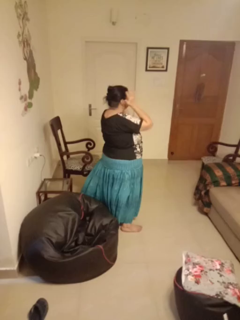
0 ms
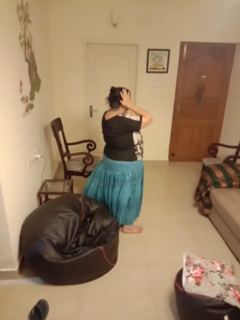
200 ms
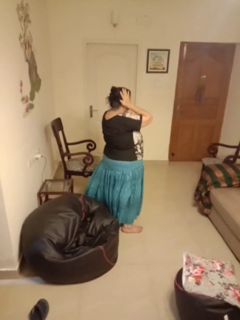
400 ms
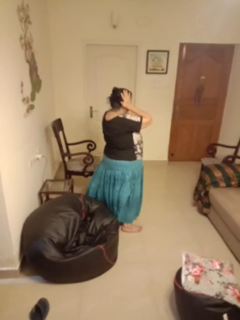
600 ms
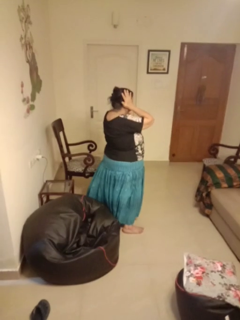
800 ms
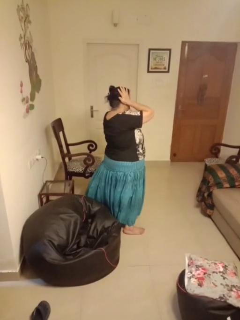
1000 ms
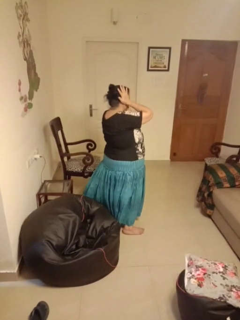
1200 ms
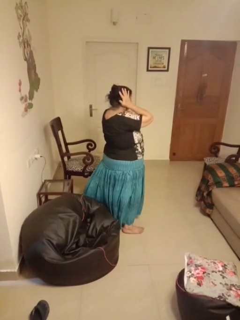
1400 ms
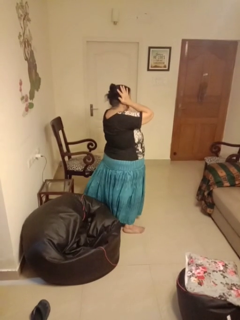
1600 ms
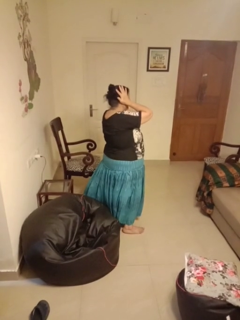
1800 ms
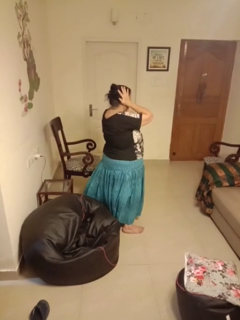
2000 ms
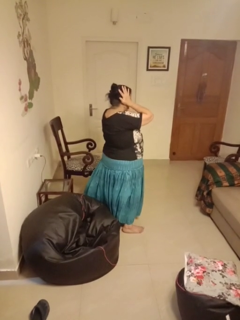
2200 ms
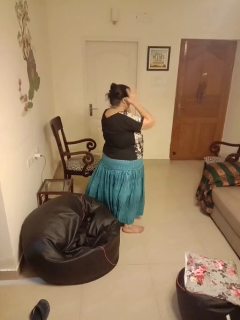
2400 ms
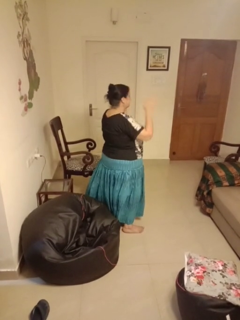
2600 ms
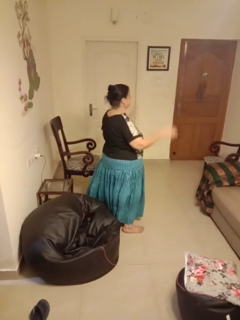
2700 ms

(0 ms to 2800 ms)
person puts fingers in ear

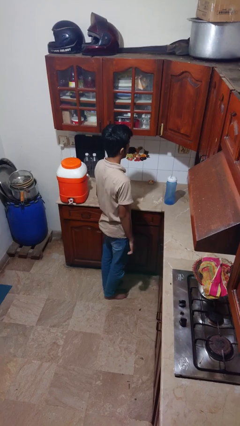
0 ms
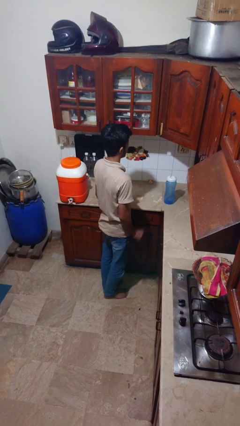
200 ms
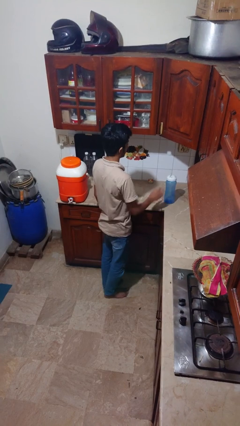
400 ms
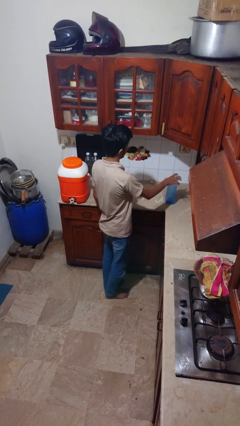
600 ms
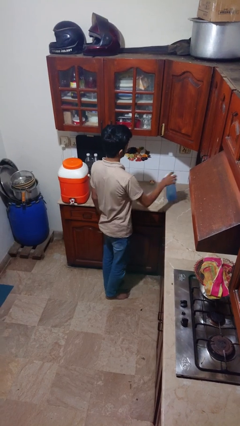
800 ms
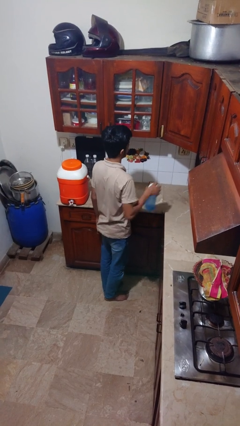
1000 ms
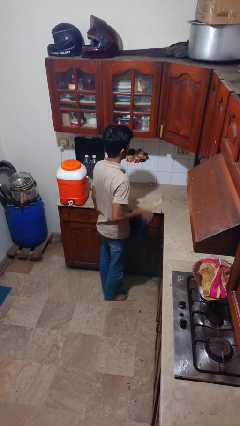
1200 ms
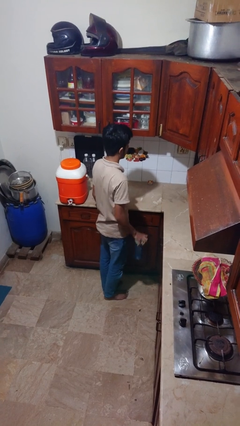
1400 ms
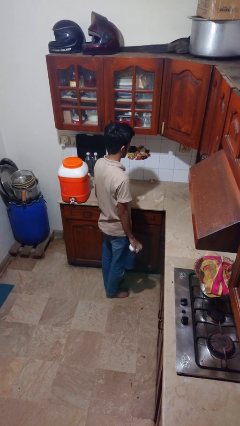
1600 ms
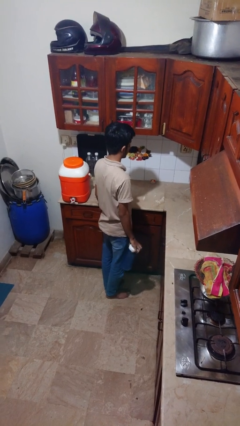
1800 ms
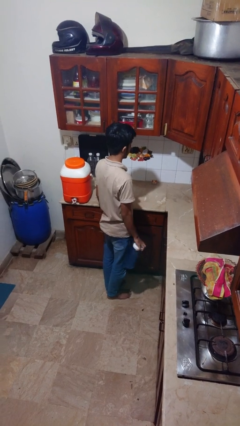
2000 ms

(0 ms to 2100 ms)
person picks up object from countertop

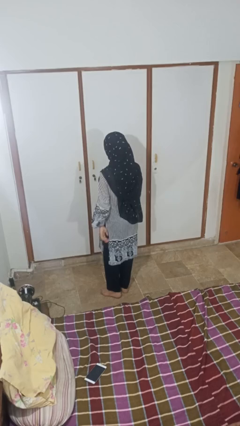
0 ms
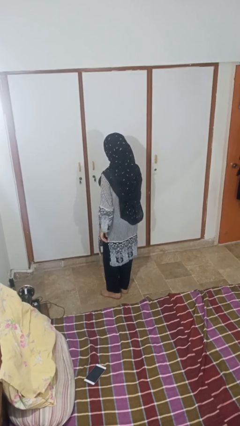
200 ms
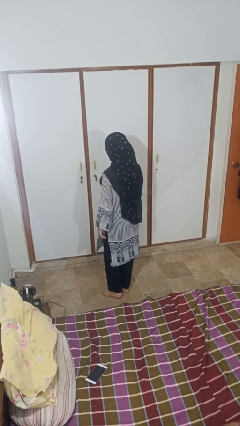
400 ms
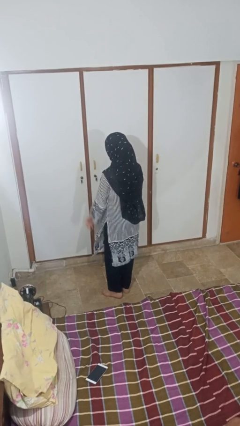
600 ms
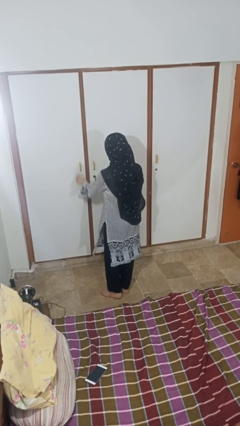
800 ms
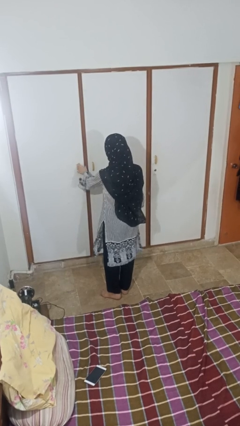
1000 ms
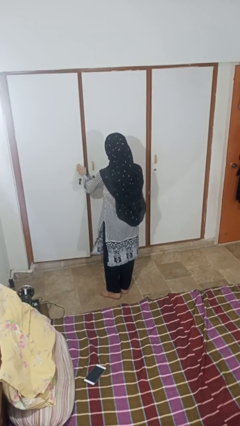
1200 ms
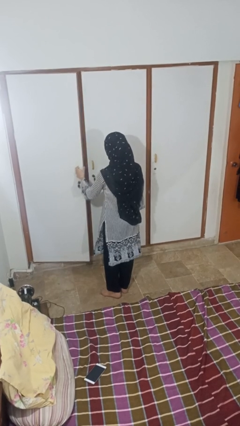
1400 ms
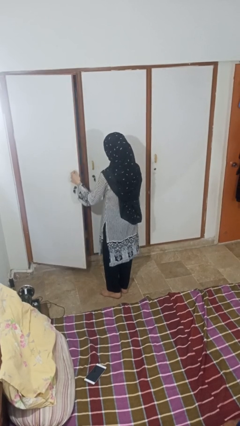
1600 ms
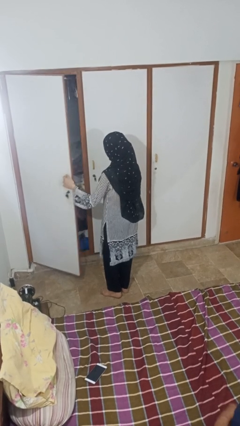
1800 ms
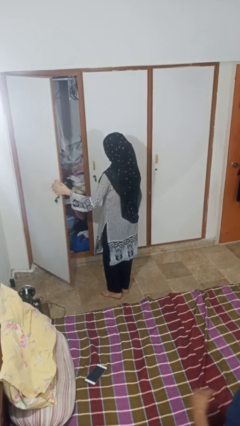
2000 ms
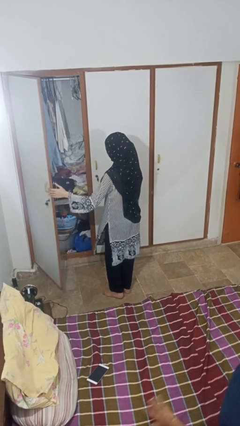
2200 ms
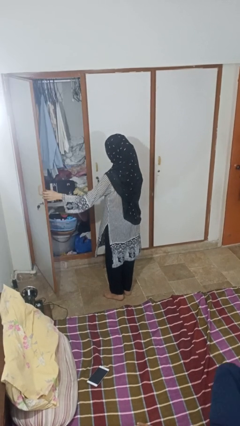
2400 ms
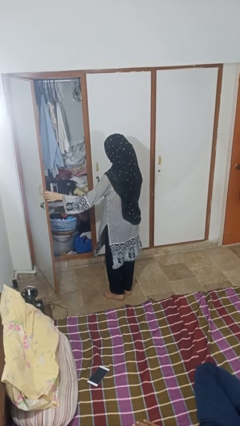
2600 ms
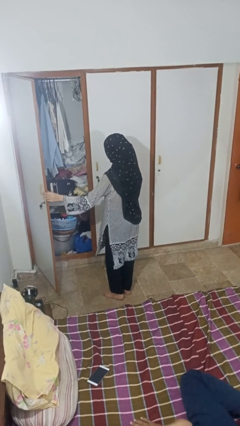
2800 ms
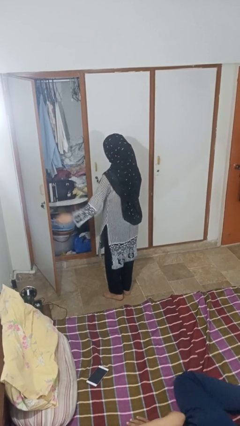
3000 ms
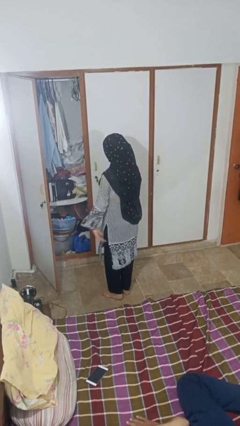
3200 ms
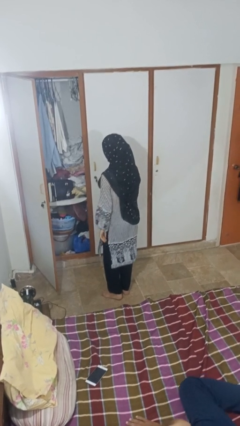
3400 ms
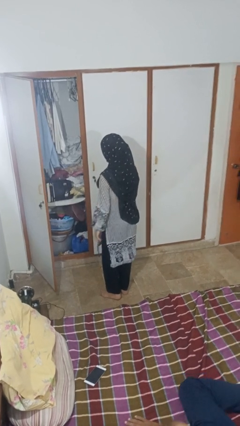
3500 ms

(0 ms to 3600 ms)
person opens closet door

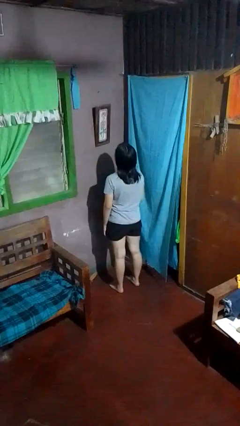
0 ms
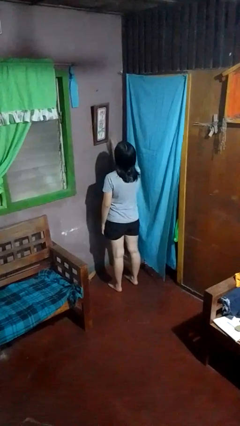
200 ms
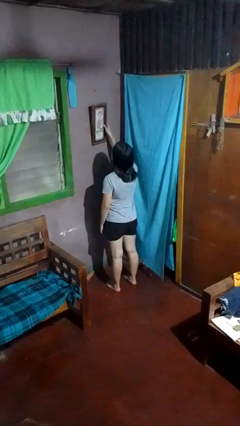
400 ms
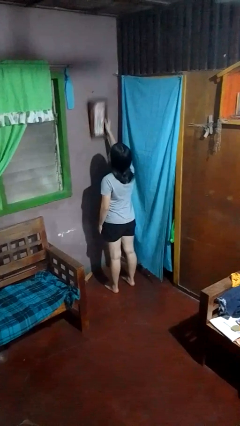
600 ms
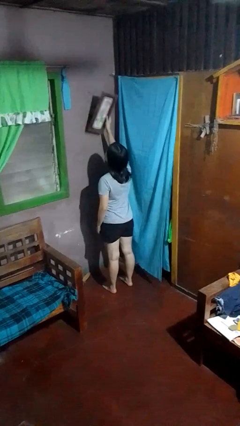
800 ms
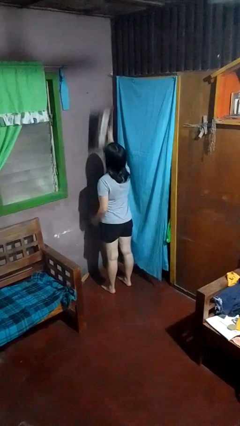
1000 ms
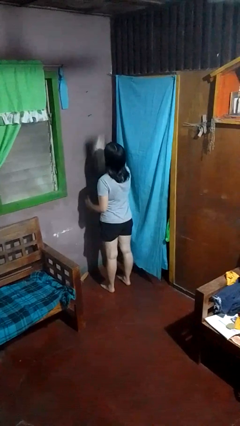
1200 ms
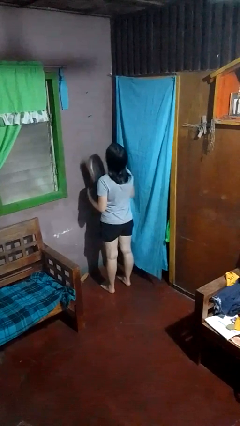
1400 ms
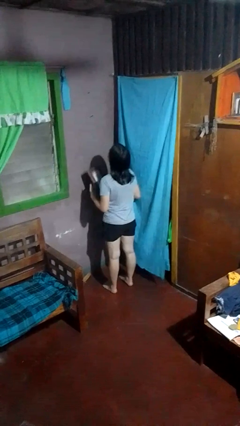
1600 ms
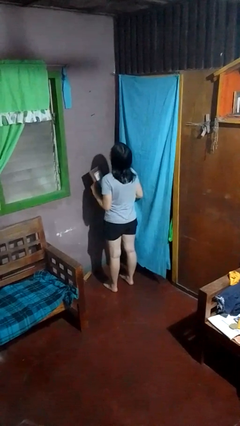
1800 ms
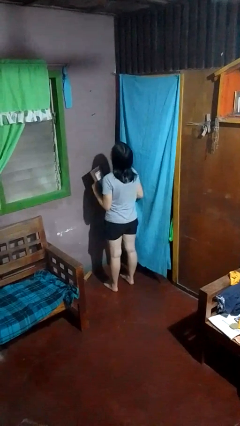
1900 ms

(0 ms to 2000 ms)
person takes down picture frame

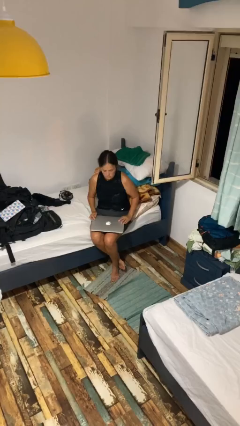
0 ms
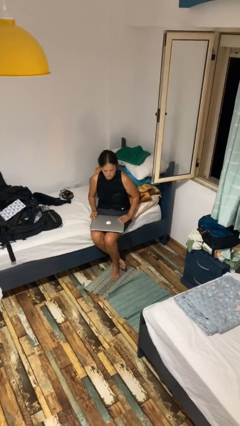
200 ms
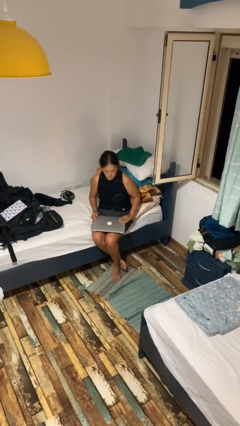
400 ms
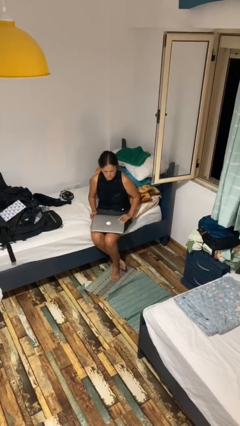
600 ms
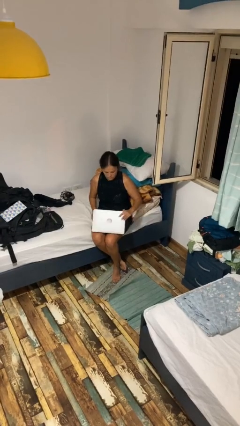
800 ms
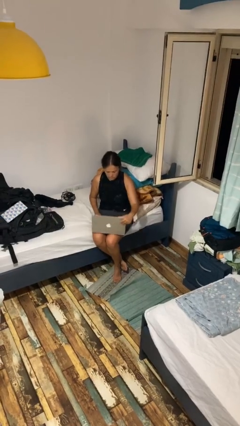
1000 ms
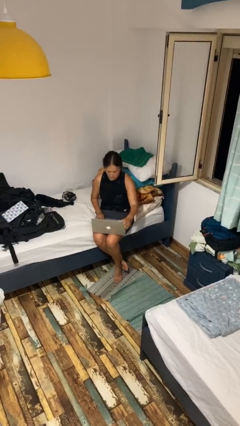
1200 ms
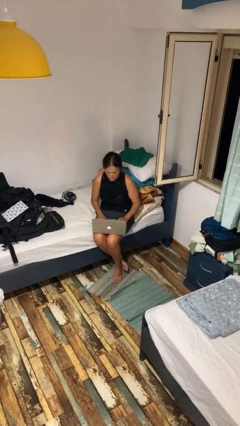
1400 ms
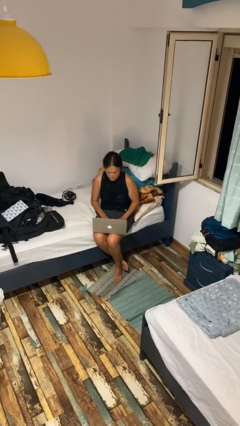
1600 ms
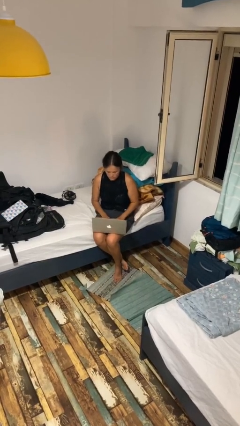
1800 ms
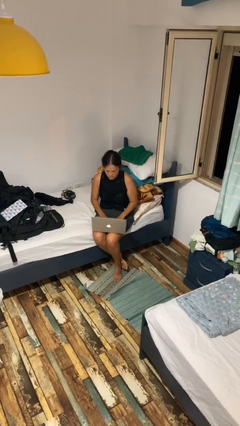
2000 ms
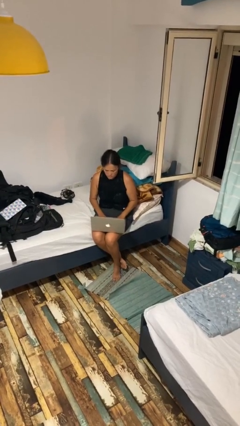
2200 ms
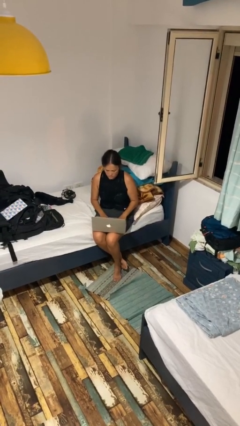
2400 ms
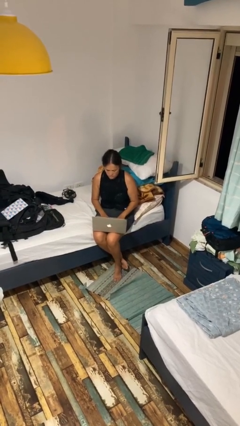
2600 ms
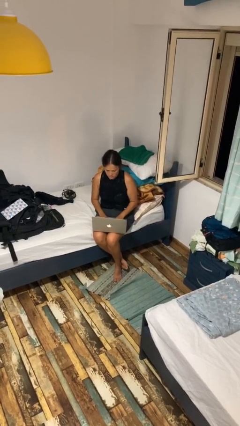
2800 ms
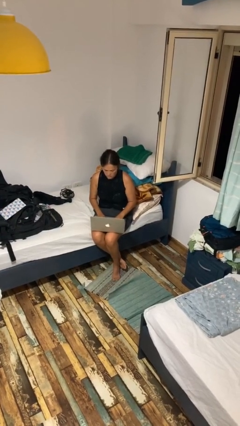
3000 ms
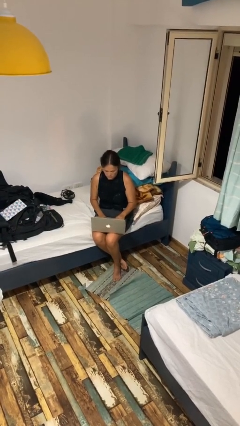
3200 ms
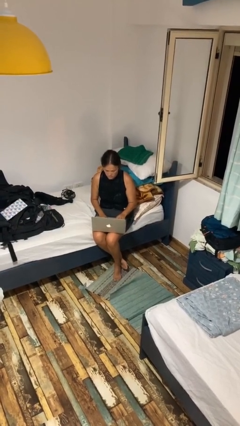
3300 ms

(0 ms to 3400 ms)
person opens laptop

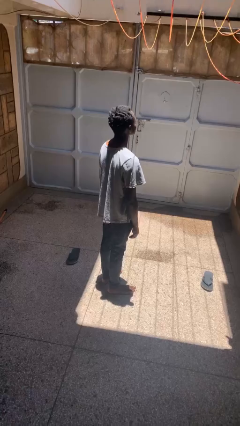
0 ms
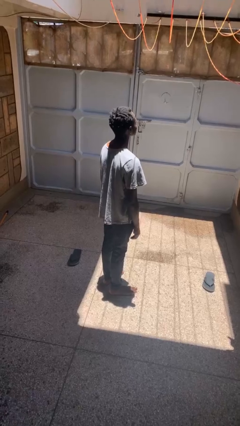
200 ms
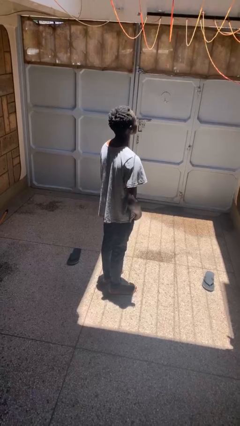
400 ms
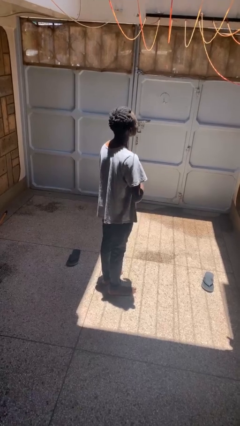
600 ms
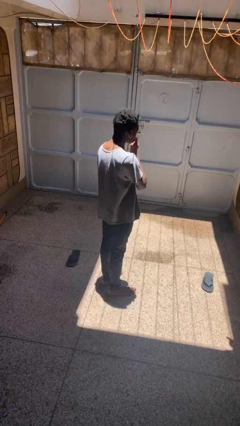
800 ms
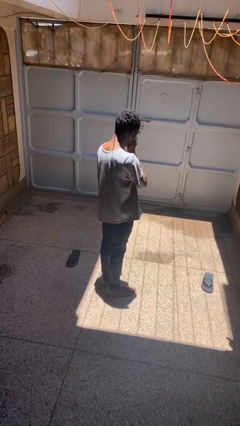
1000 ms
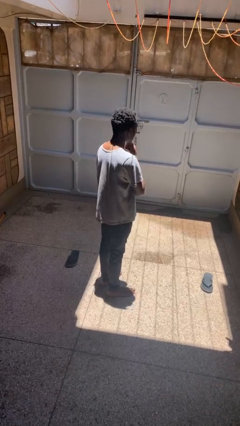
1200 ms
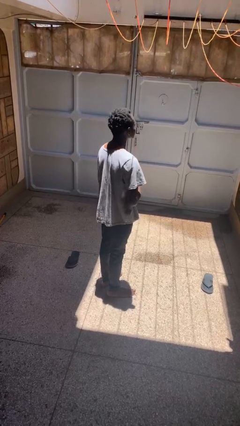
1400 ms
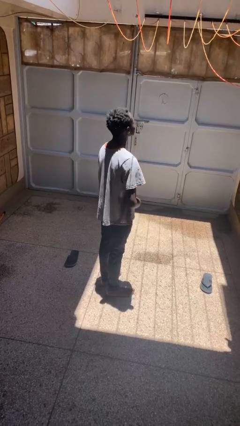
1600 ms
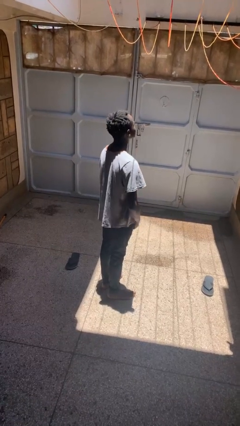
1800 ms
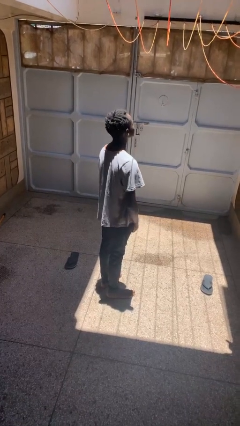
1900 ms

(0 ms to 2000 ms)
person sneezes into hand

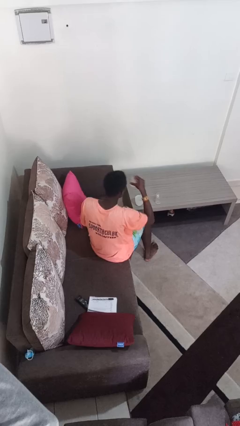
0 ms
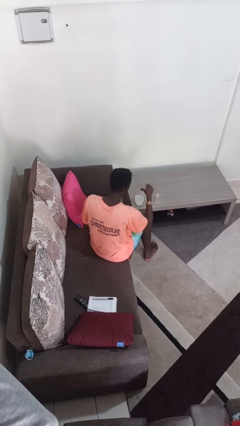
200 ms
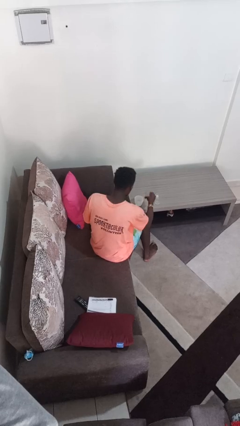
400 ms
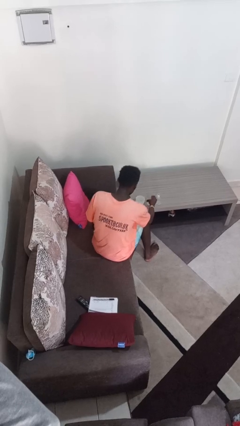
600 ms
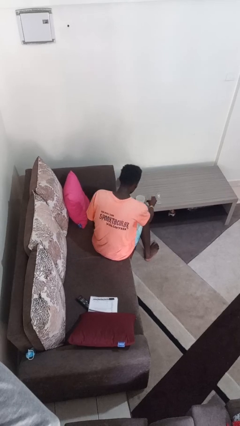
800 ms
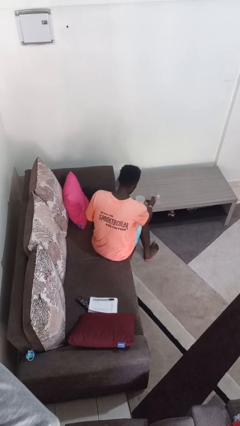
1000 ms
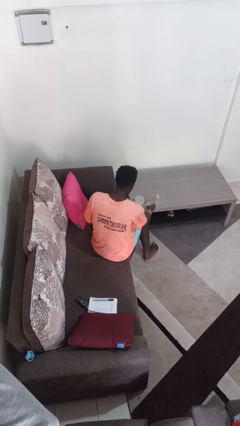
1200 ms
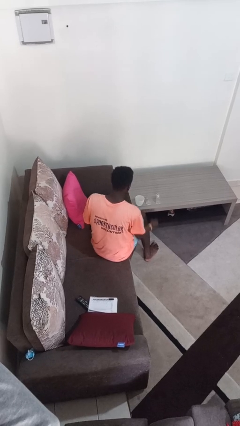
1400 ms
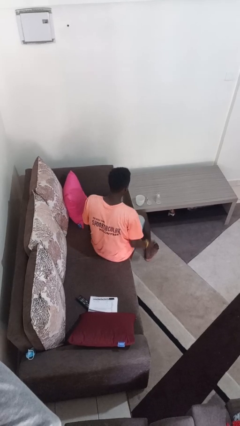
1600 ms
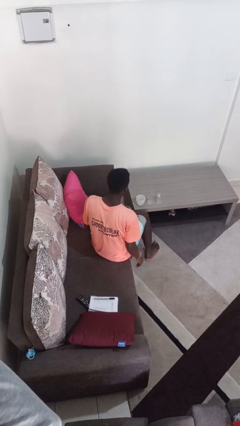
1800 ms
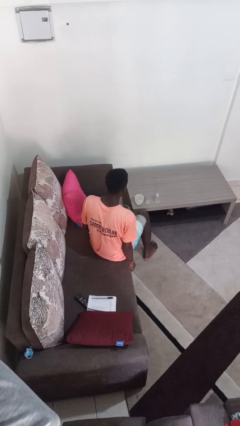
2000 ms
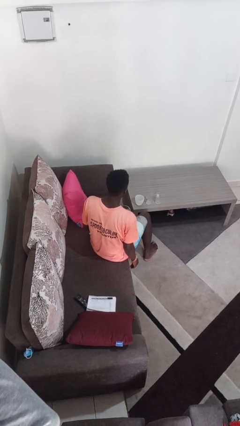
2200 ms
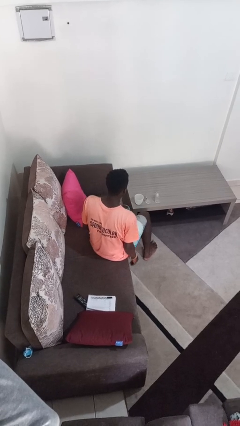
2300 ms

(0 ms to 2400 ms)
person puts down object on table
